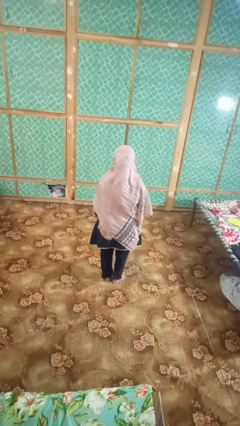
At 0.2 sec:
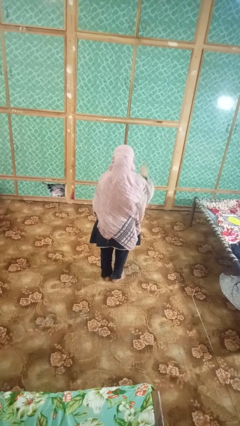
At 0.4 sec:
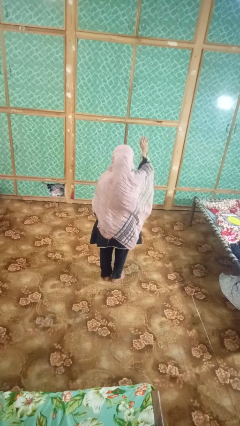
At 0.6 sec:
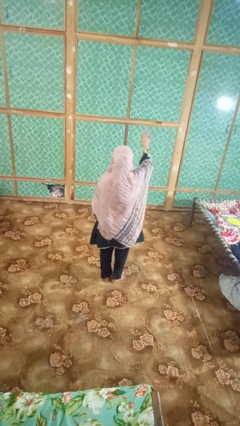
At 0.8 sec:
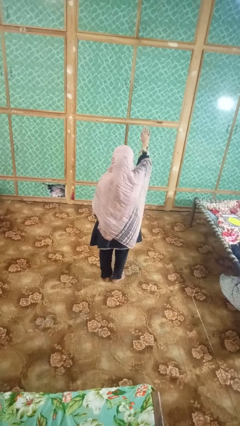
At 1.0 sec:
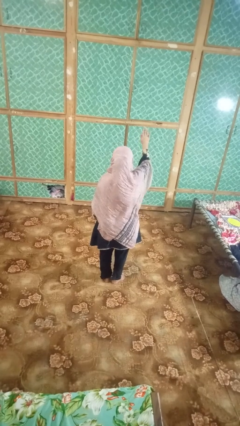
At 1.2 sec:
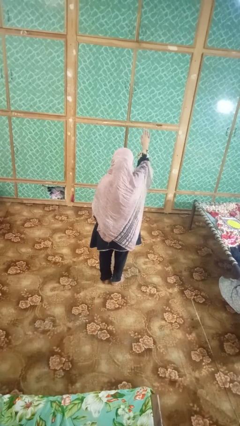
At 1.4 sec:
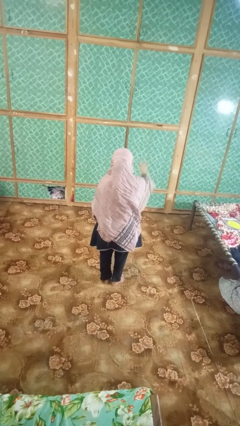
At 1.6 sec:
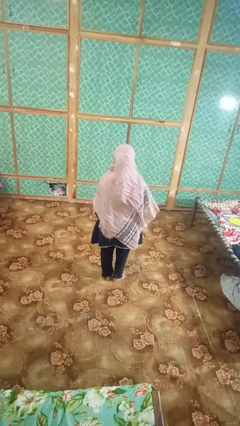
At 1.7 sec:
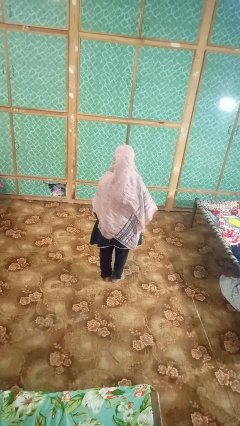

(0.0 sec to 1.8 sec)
person gestures stop

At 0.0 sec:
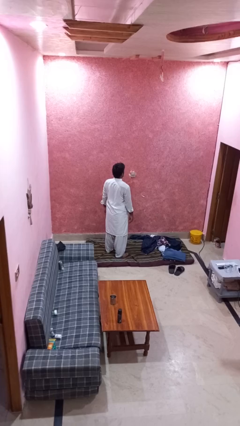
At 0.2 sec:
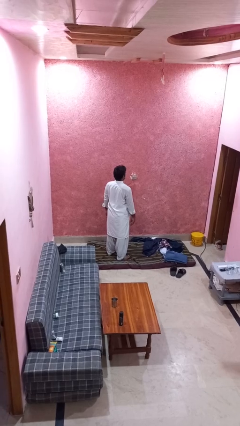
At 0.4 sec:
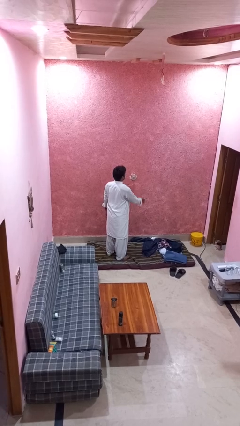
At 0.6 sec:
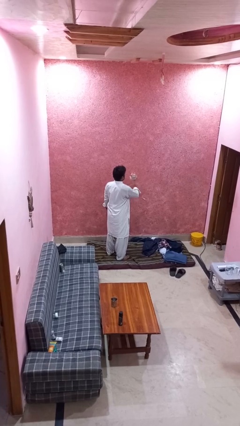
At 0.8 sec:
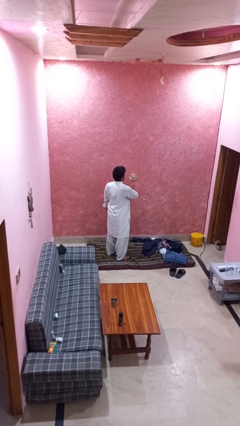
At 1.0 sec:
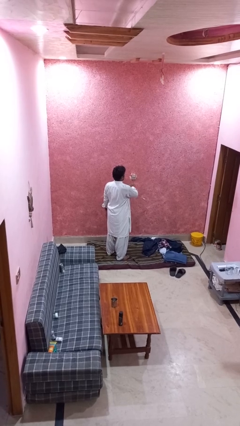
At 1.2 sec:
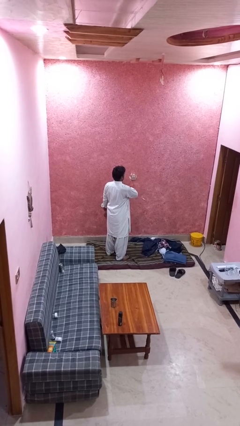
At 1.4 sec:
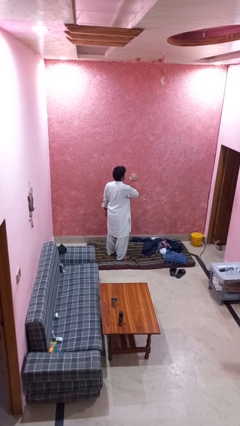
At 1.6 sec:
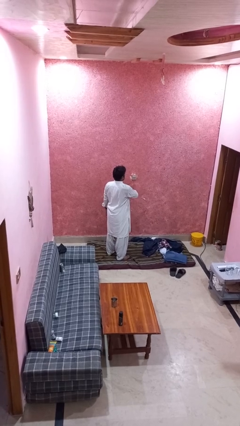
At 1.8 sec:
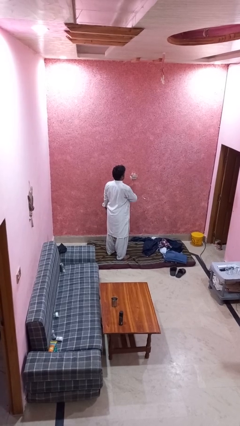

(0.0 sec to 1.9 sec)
person drums on chest

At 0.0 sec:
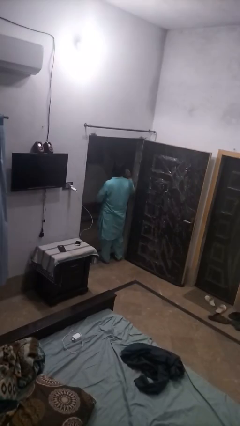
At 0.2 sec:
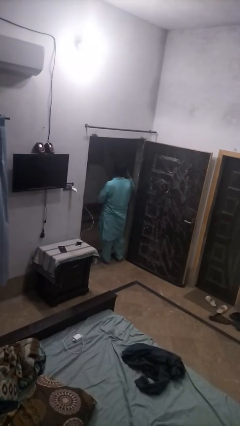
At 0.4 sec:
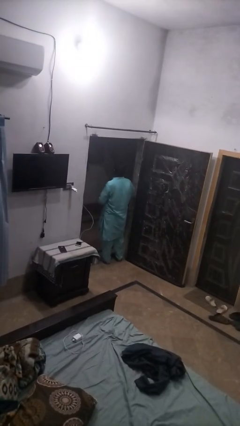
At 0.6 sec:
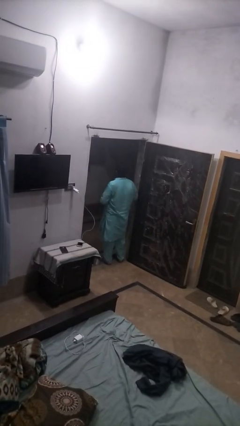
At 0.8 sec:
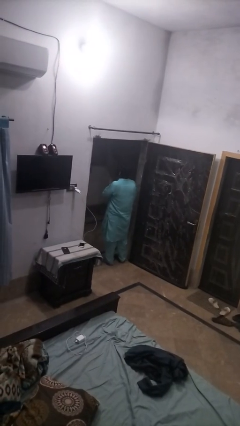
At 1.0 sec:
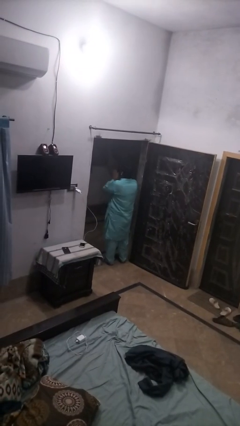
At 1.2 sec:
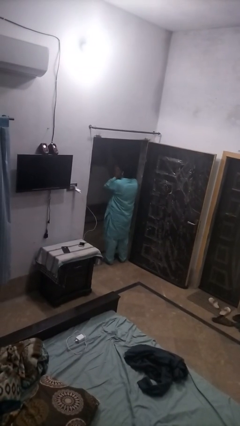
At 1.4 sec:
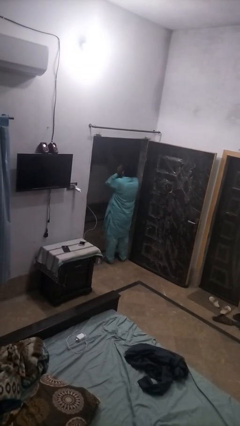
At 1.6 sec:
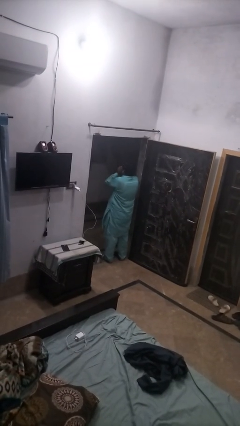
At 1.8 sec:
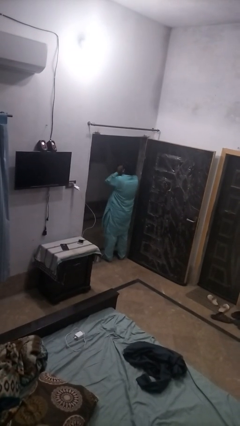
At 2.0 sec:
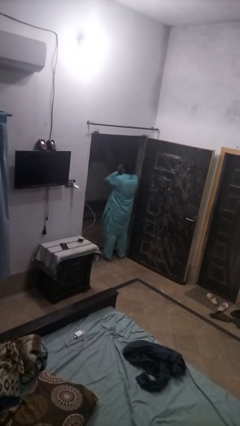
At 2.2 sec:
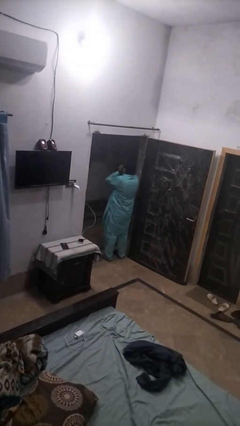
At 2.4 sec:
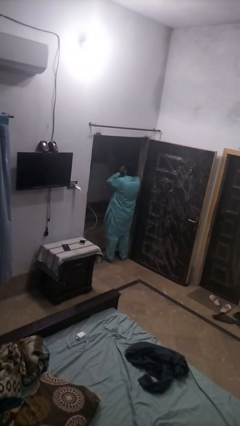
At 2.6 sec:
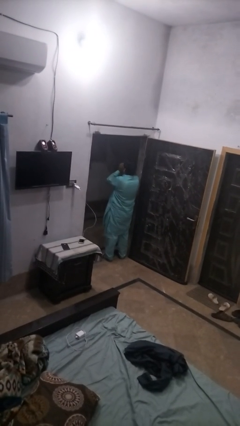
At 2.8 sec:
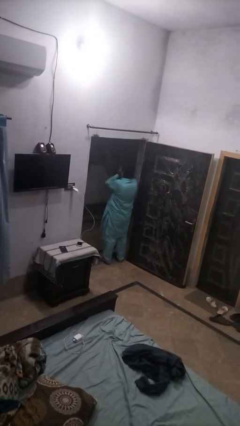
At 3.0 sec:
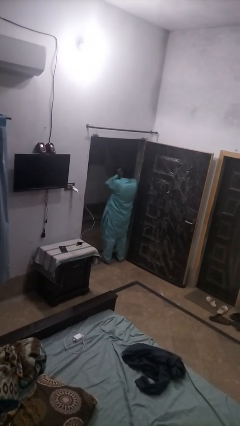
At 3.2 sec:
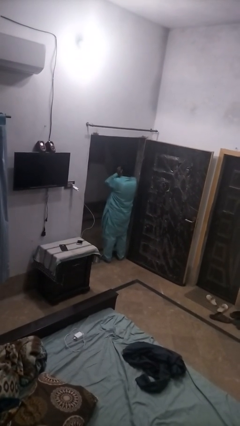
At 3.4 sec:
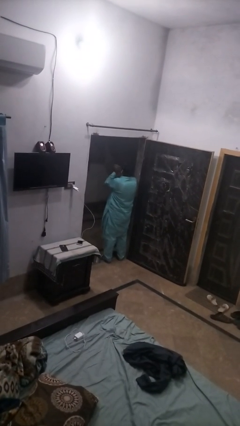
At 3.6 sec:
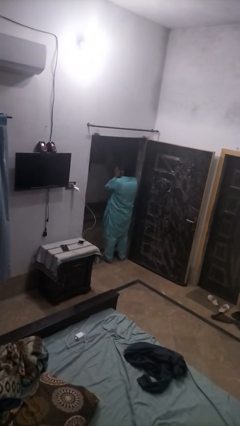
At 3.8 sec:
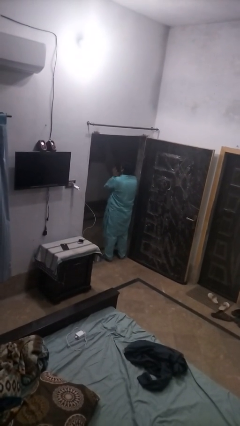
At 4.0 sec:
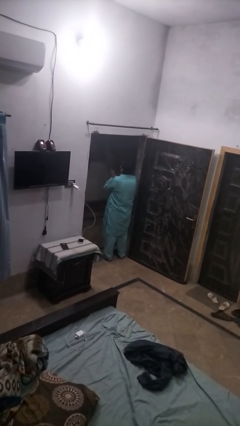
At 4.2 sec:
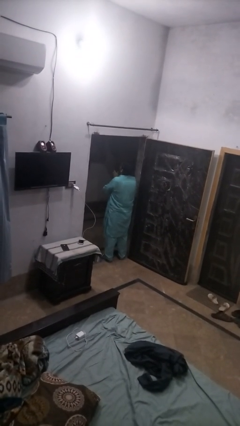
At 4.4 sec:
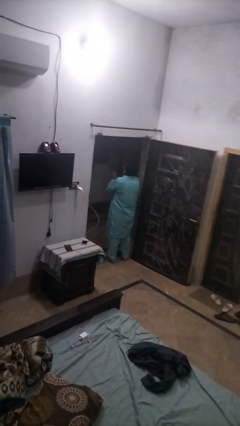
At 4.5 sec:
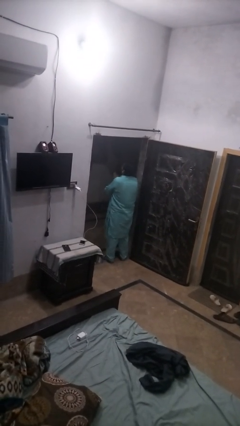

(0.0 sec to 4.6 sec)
person blows into hands

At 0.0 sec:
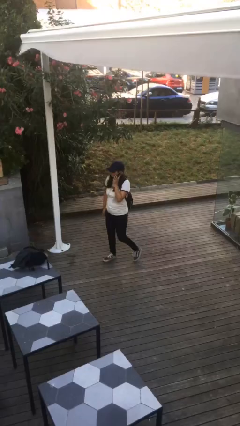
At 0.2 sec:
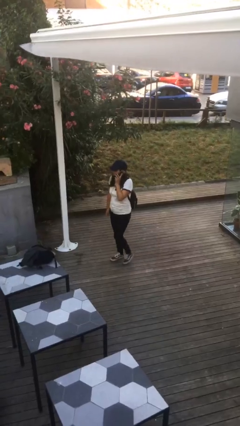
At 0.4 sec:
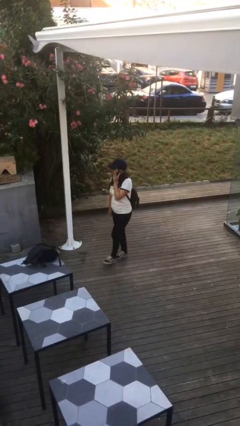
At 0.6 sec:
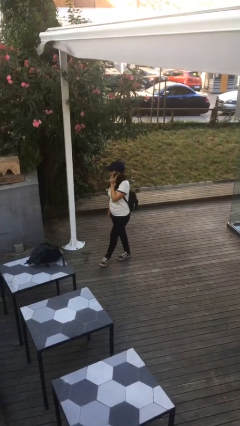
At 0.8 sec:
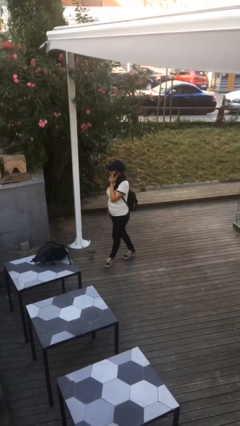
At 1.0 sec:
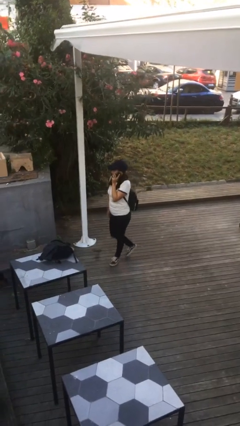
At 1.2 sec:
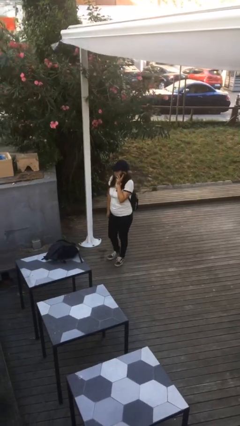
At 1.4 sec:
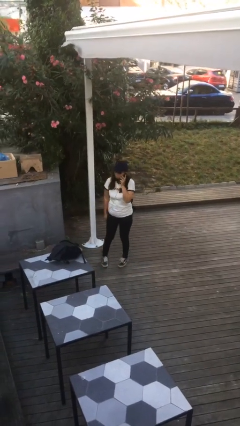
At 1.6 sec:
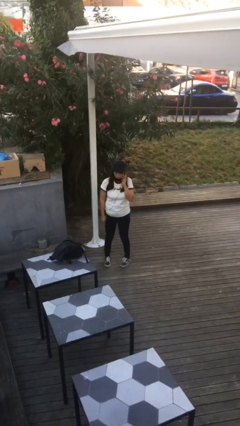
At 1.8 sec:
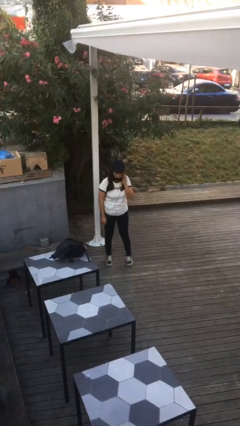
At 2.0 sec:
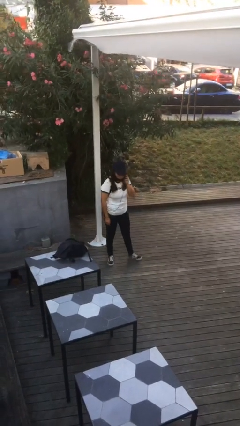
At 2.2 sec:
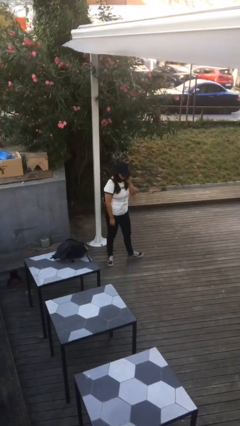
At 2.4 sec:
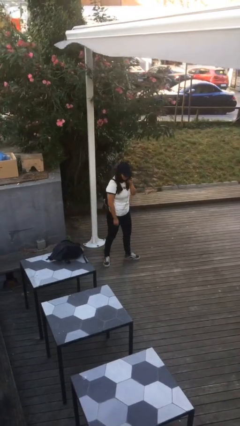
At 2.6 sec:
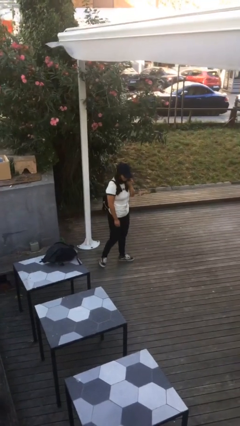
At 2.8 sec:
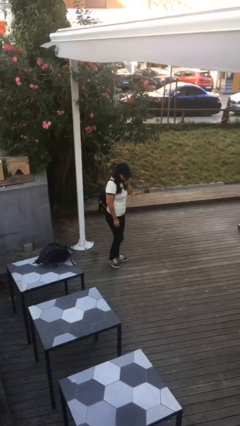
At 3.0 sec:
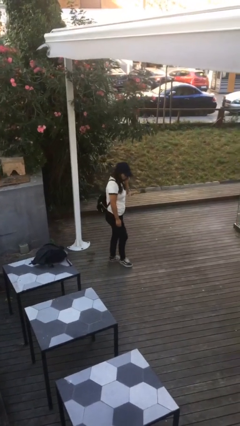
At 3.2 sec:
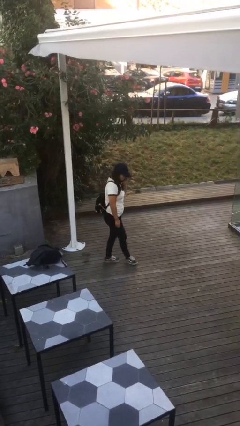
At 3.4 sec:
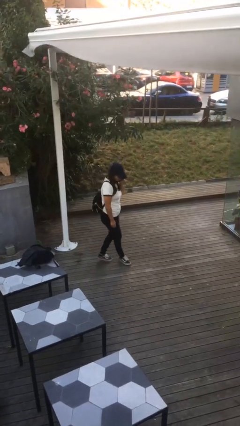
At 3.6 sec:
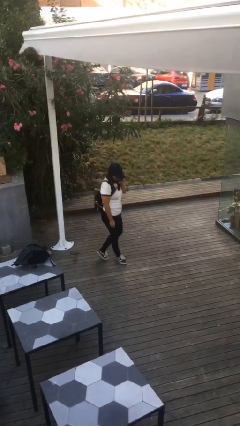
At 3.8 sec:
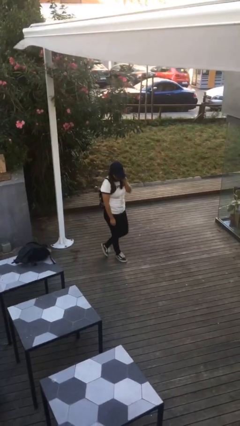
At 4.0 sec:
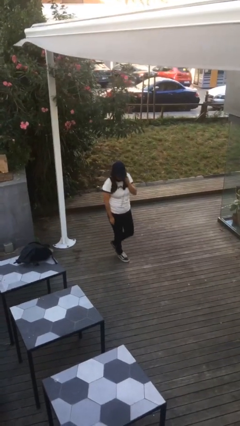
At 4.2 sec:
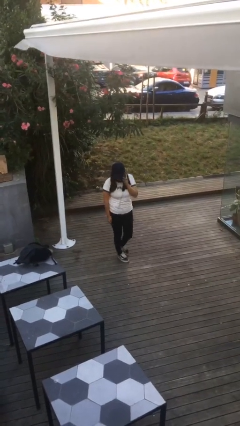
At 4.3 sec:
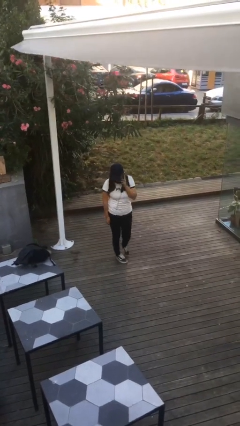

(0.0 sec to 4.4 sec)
person talks on phone

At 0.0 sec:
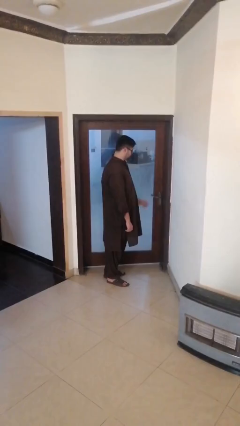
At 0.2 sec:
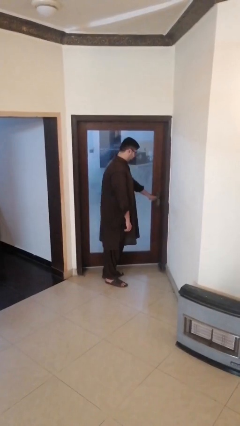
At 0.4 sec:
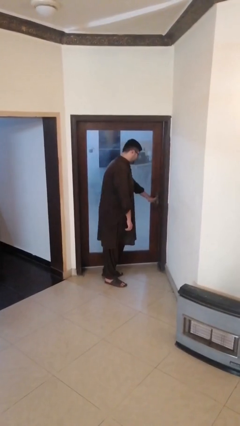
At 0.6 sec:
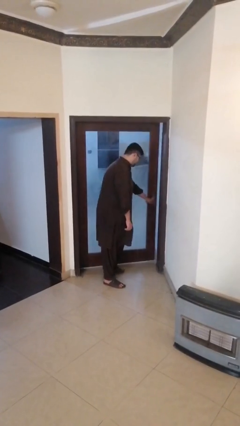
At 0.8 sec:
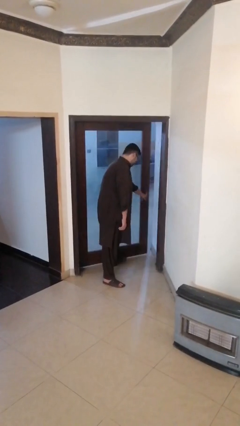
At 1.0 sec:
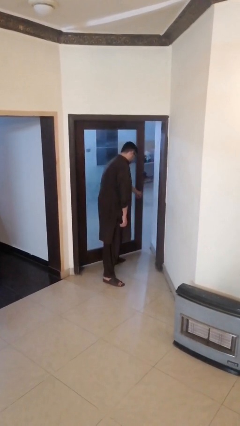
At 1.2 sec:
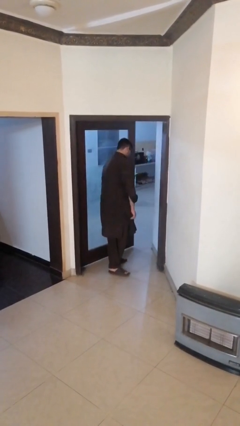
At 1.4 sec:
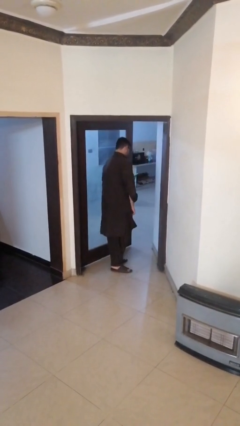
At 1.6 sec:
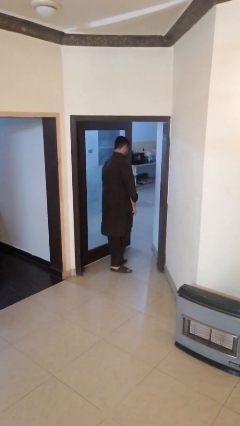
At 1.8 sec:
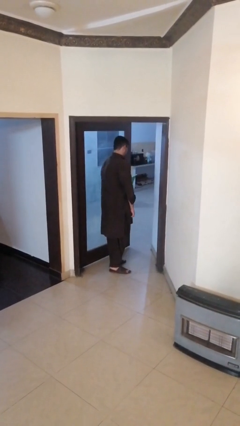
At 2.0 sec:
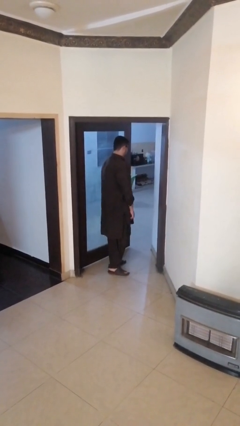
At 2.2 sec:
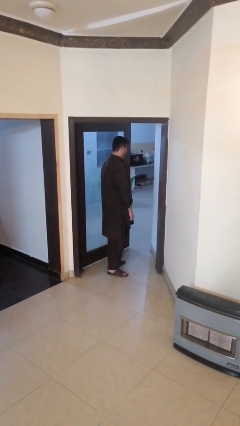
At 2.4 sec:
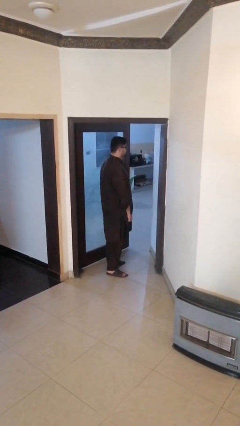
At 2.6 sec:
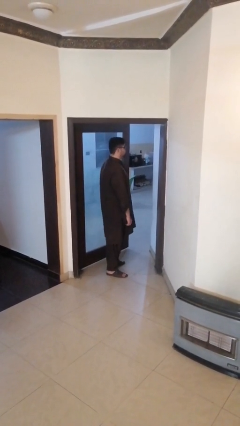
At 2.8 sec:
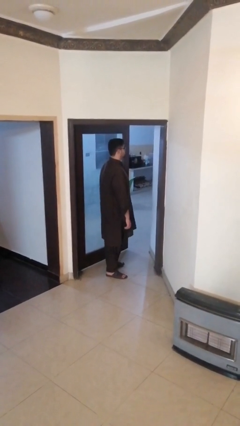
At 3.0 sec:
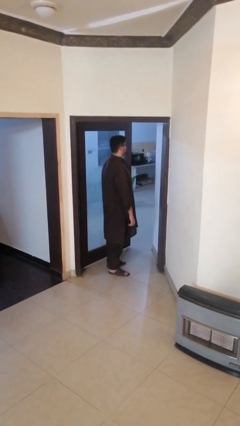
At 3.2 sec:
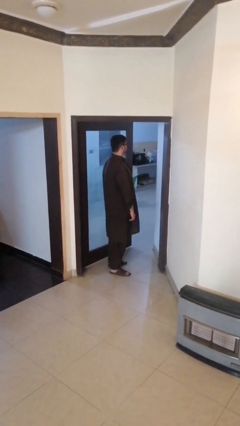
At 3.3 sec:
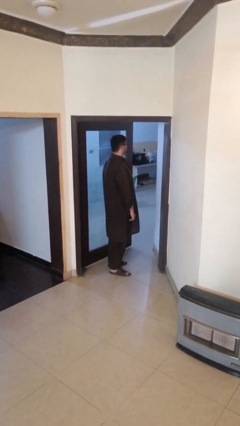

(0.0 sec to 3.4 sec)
person opens facility door

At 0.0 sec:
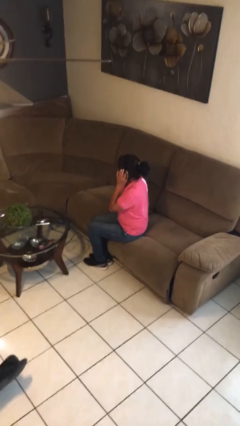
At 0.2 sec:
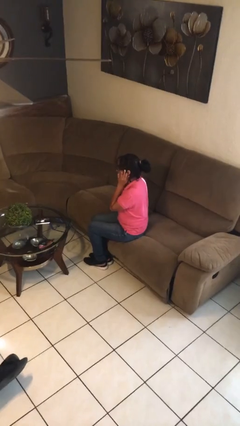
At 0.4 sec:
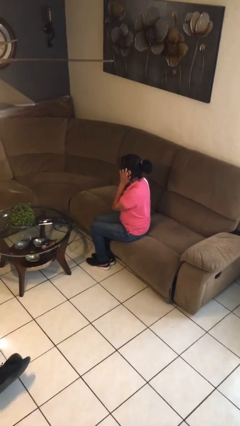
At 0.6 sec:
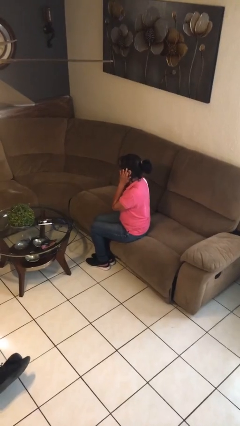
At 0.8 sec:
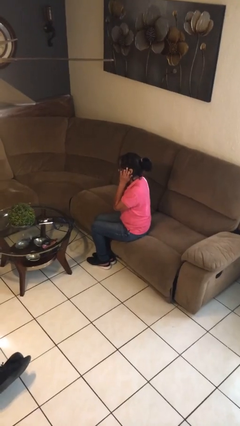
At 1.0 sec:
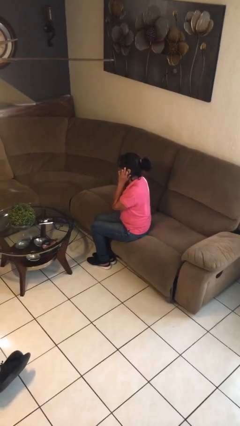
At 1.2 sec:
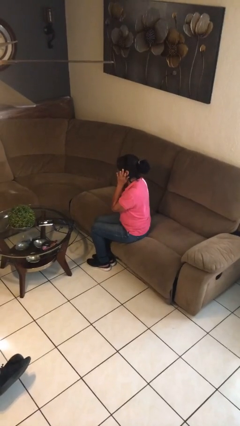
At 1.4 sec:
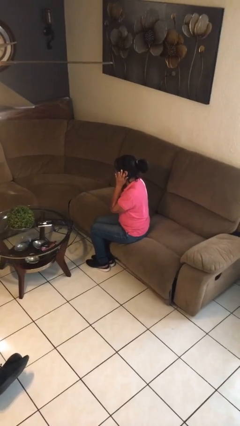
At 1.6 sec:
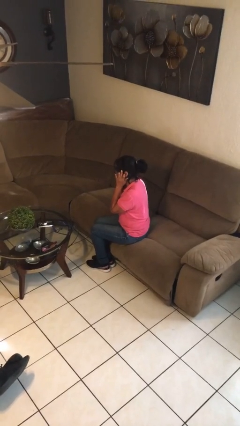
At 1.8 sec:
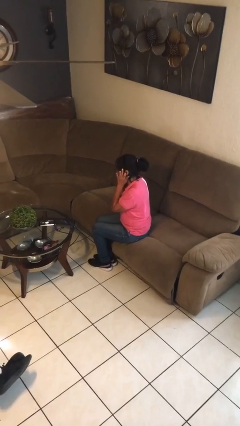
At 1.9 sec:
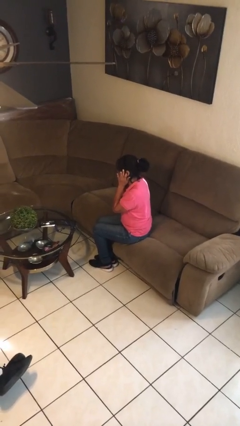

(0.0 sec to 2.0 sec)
person puts fingers in ear
